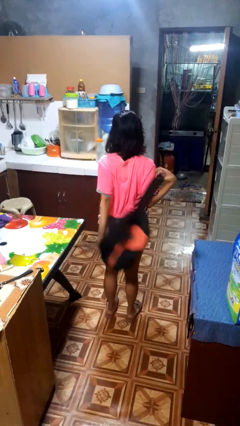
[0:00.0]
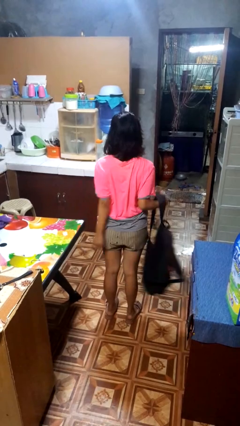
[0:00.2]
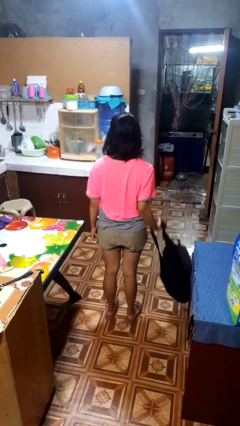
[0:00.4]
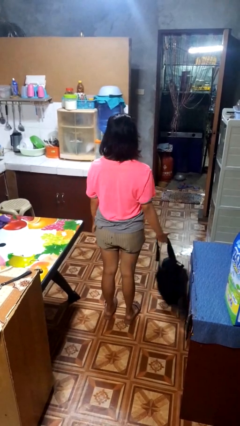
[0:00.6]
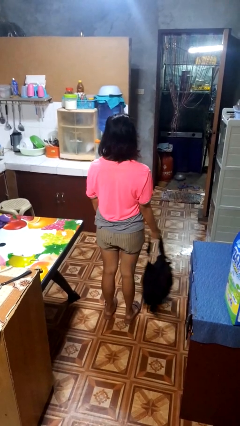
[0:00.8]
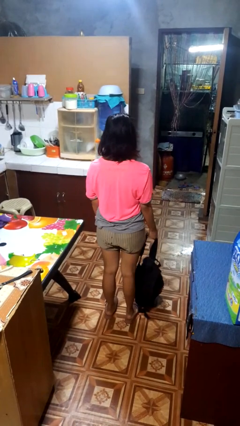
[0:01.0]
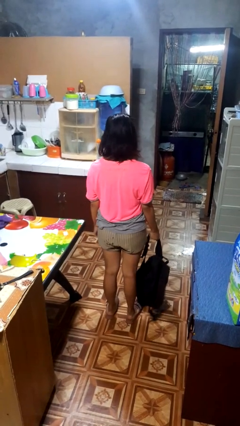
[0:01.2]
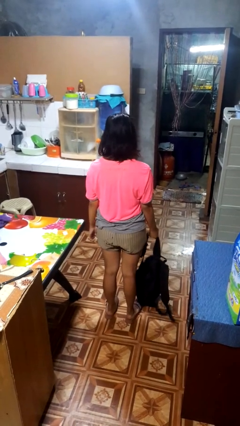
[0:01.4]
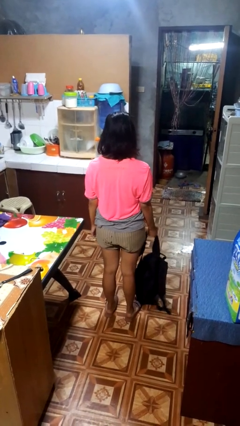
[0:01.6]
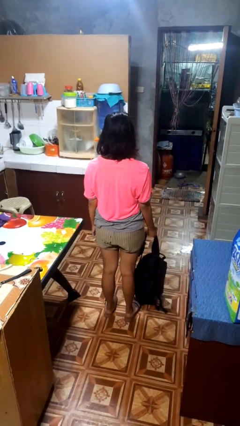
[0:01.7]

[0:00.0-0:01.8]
person takes off backpack

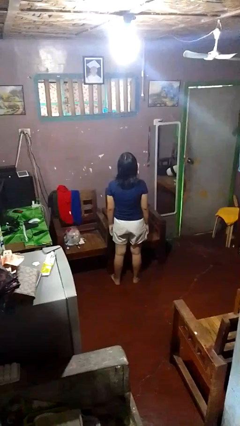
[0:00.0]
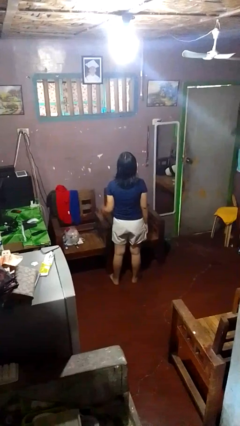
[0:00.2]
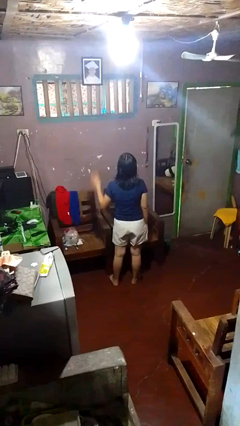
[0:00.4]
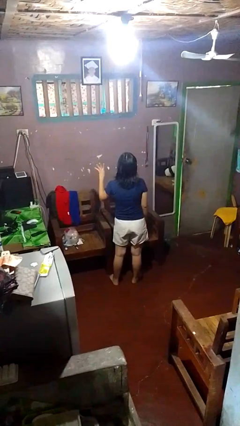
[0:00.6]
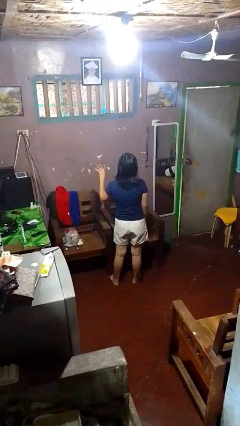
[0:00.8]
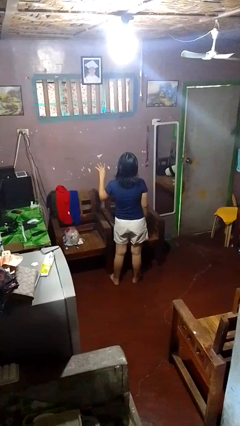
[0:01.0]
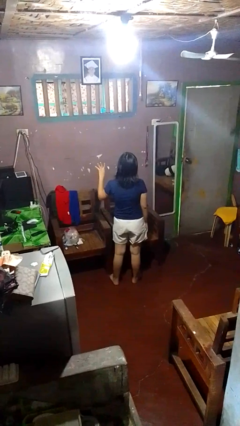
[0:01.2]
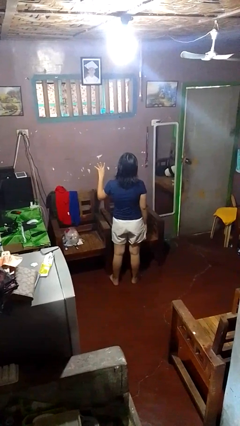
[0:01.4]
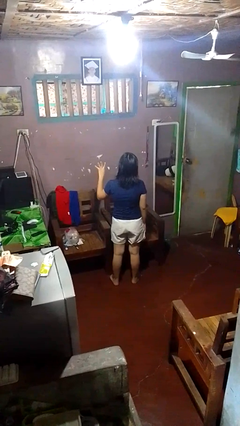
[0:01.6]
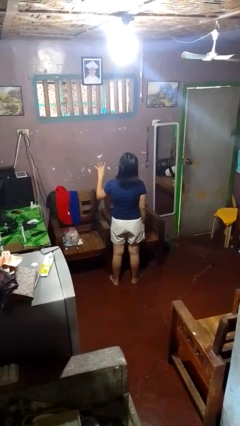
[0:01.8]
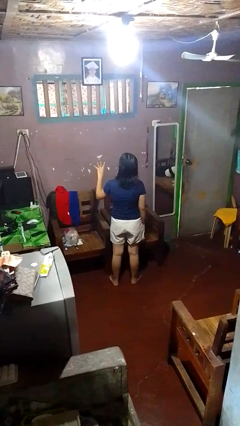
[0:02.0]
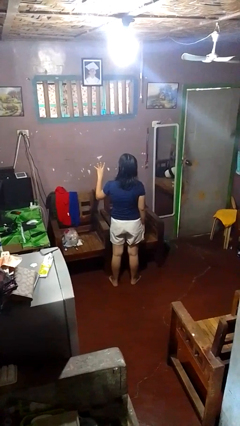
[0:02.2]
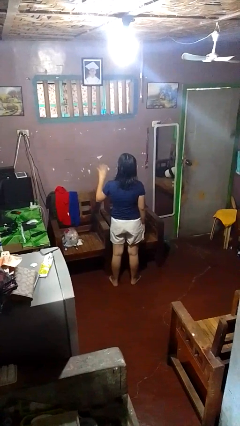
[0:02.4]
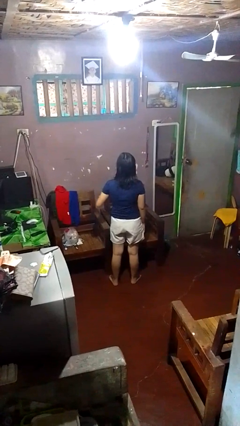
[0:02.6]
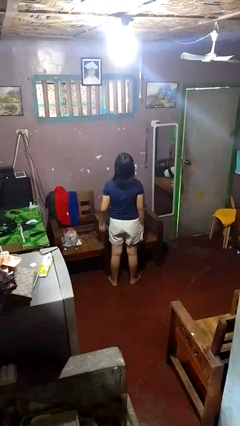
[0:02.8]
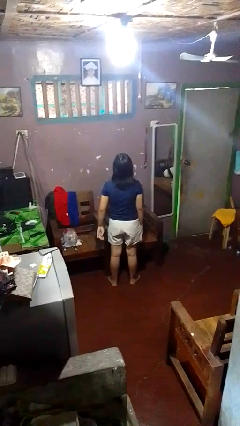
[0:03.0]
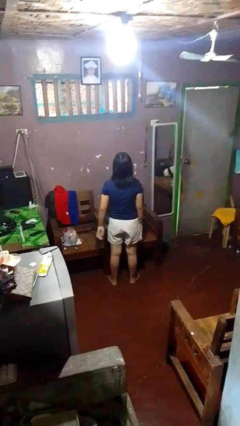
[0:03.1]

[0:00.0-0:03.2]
person gestures number four

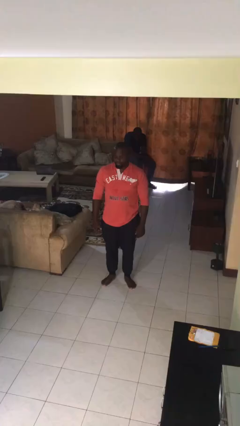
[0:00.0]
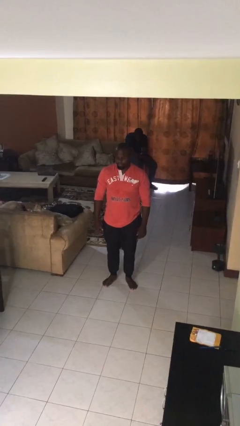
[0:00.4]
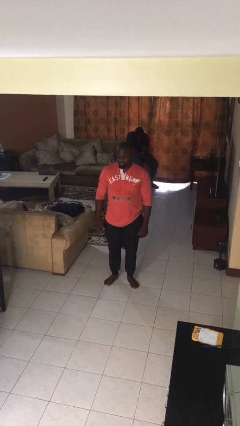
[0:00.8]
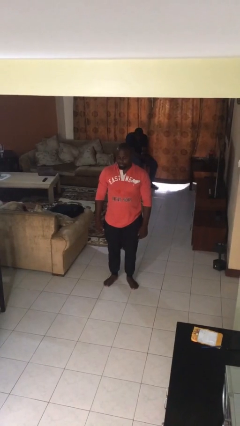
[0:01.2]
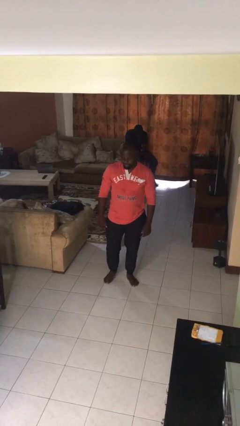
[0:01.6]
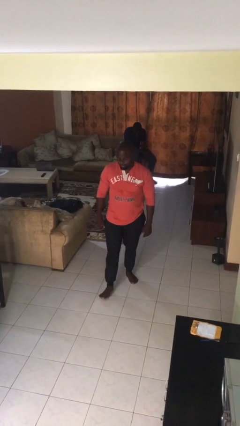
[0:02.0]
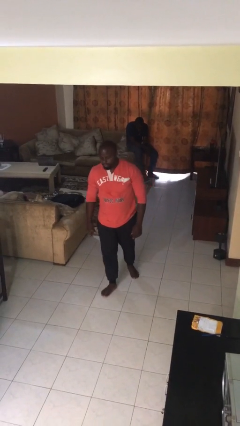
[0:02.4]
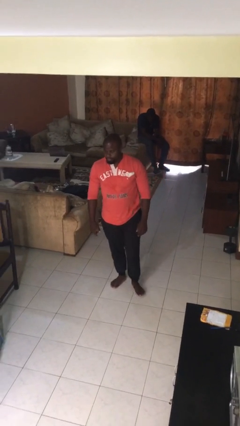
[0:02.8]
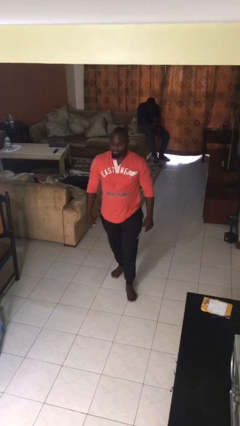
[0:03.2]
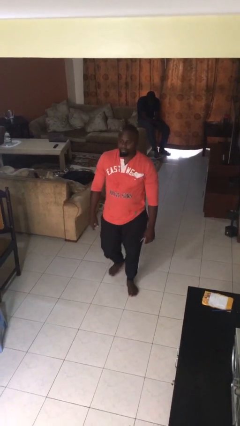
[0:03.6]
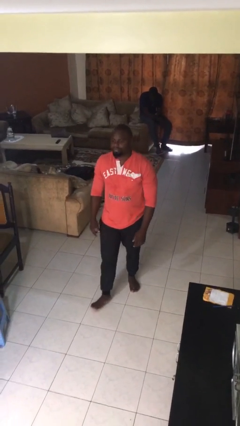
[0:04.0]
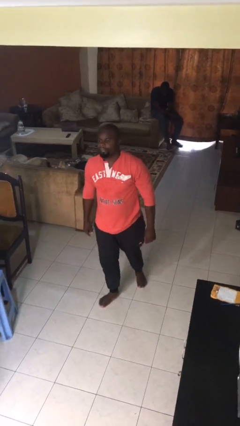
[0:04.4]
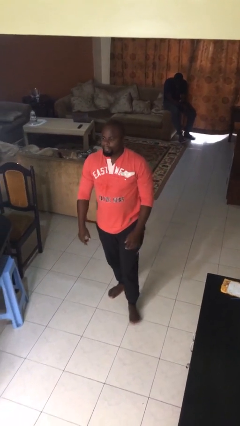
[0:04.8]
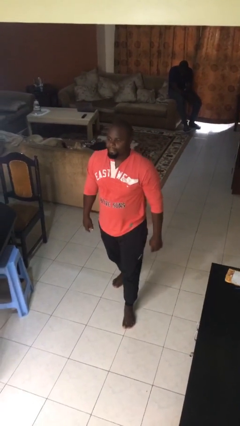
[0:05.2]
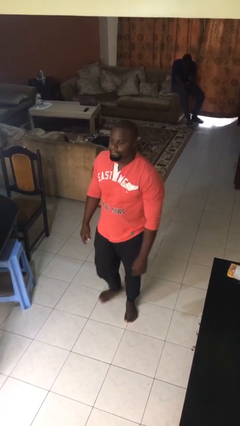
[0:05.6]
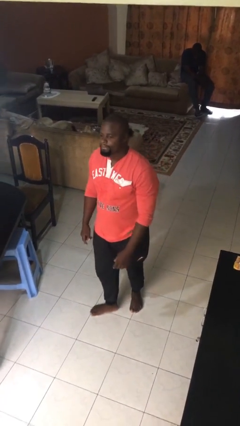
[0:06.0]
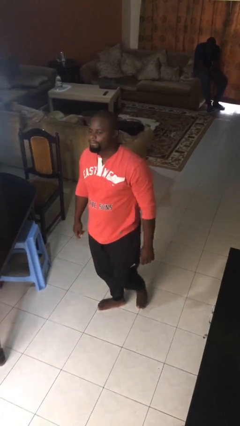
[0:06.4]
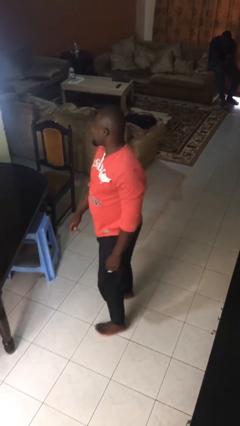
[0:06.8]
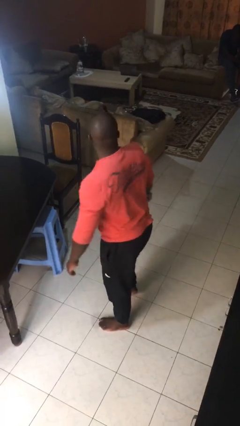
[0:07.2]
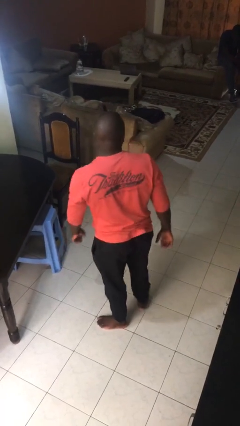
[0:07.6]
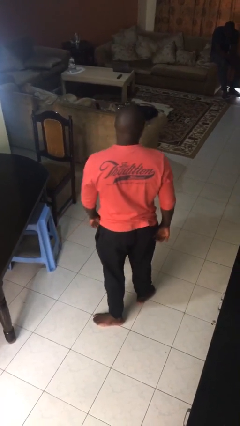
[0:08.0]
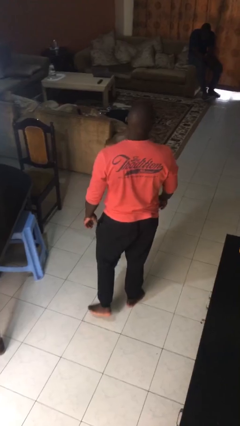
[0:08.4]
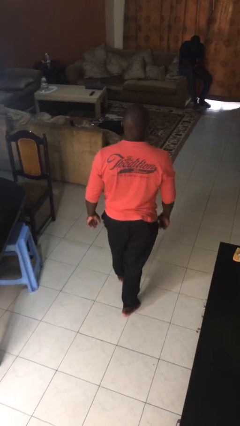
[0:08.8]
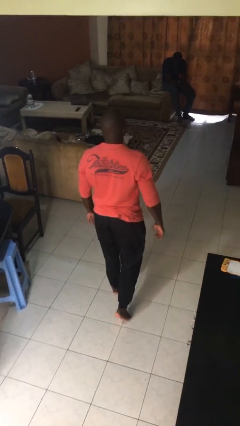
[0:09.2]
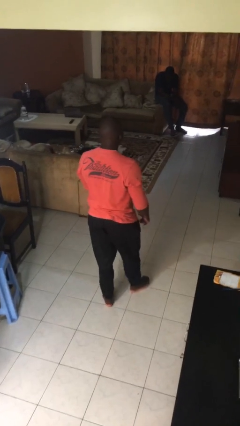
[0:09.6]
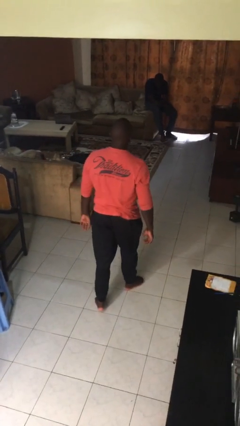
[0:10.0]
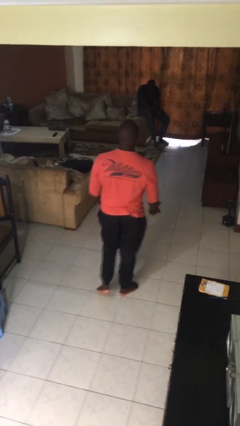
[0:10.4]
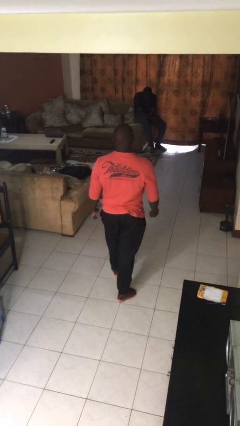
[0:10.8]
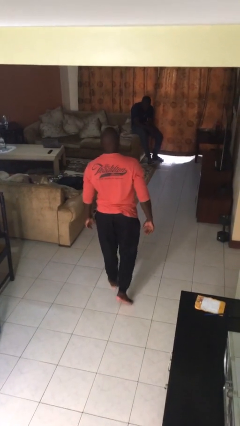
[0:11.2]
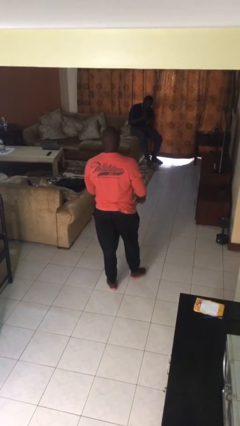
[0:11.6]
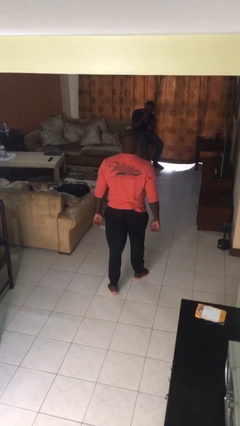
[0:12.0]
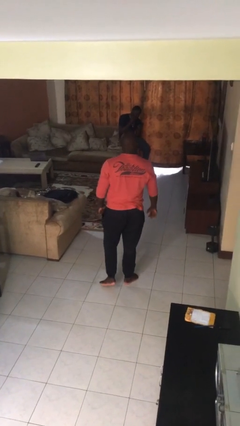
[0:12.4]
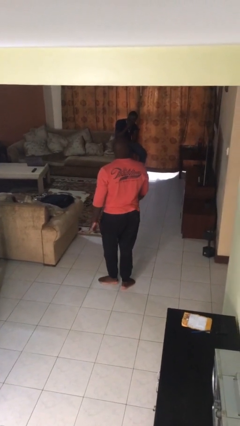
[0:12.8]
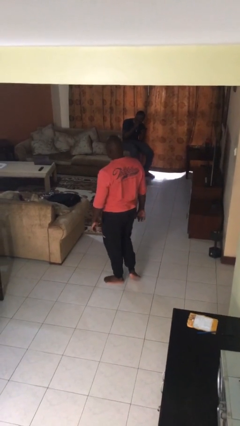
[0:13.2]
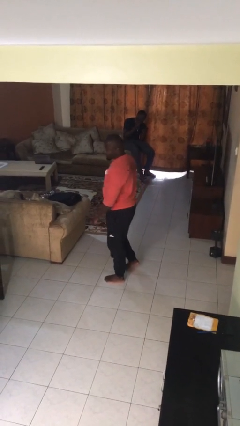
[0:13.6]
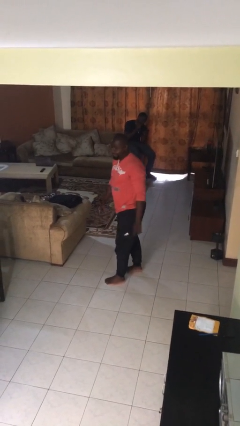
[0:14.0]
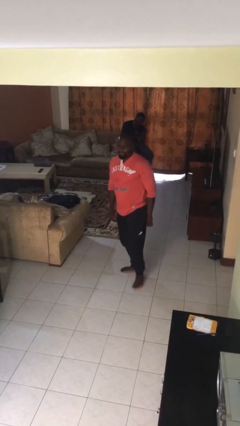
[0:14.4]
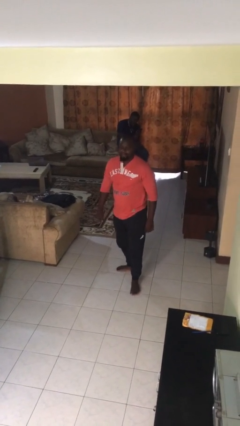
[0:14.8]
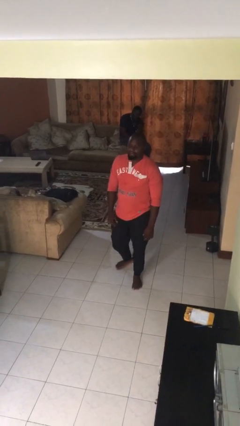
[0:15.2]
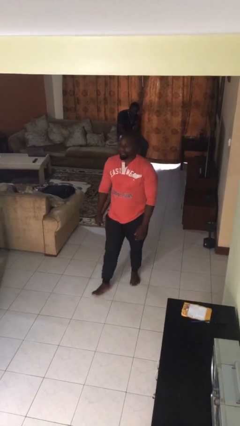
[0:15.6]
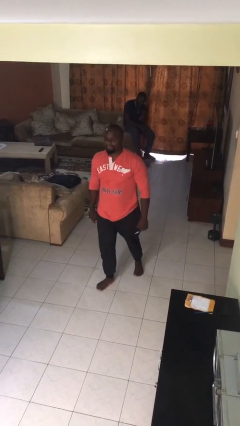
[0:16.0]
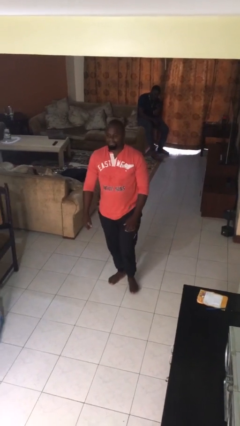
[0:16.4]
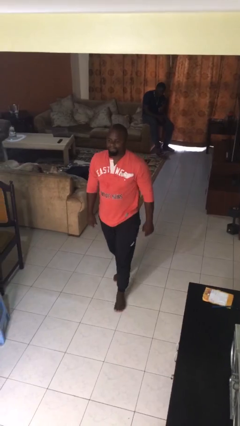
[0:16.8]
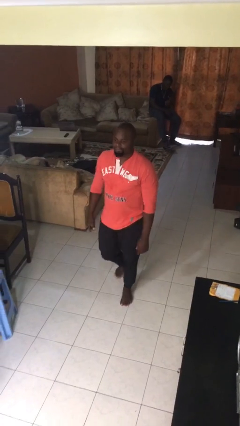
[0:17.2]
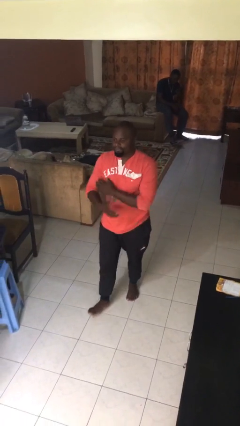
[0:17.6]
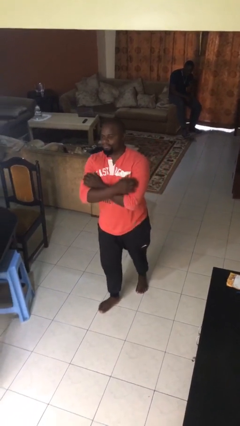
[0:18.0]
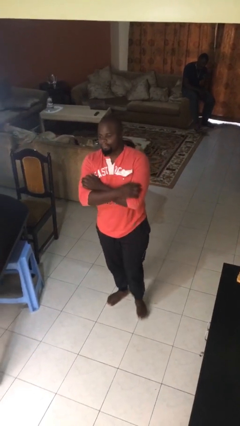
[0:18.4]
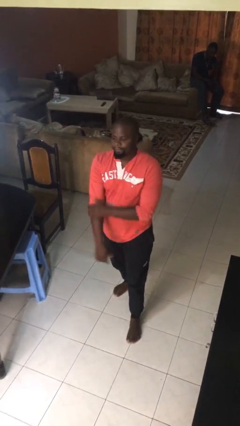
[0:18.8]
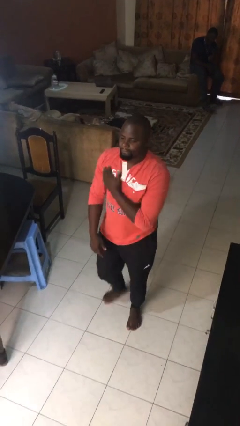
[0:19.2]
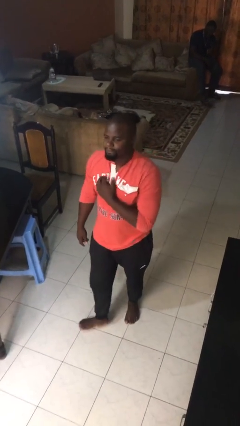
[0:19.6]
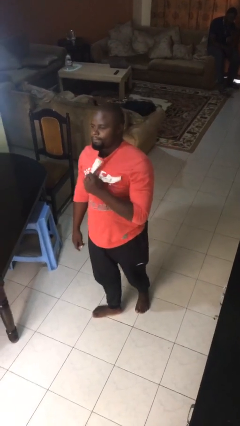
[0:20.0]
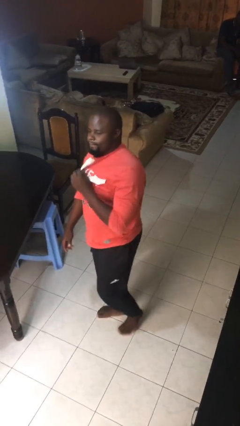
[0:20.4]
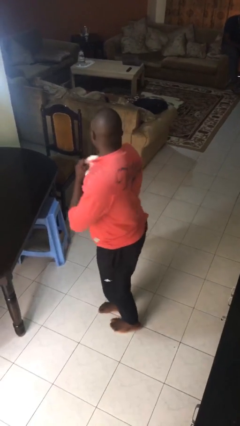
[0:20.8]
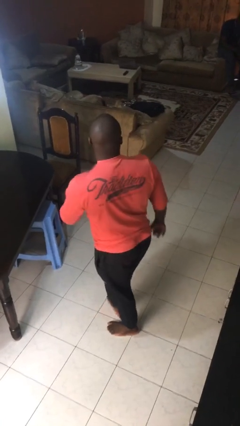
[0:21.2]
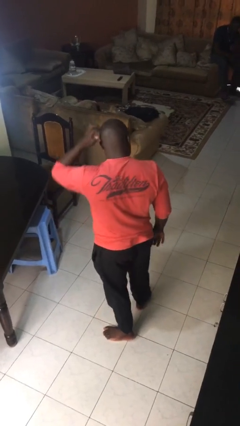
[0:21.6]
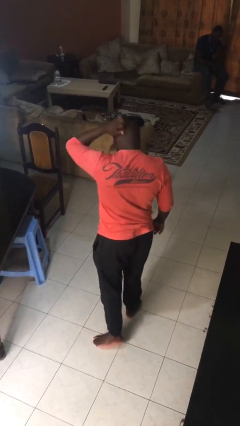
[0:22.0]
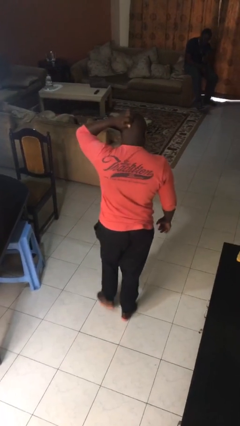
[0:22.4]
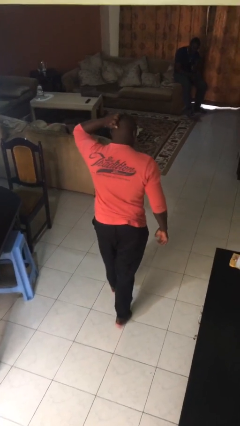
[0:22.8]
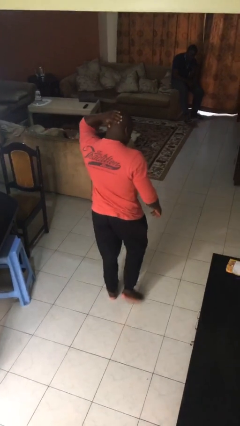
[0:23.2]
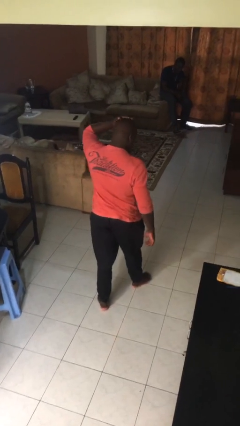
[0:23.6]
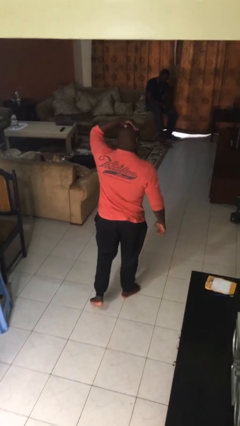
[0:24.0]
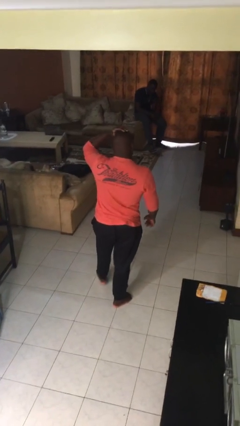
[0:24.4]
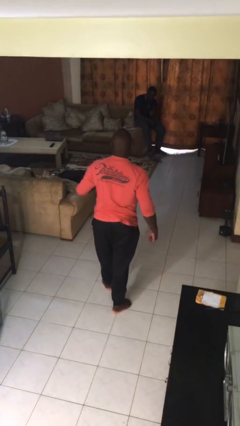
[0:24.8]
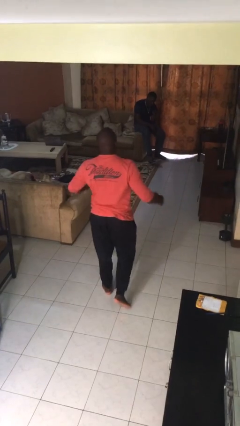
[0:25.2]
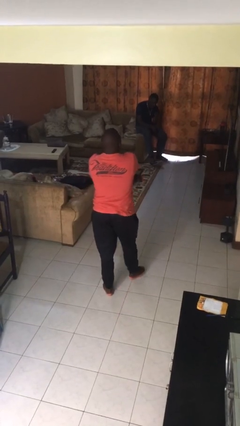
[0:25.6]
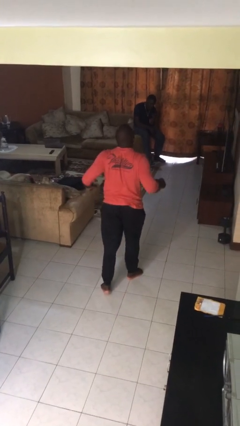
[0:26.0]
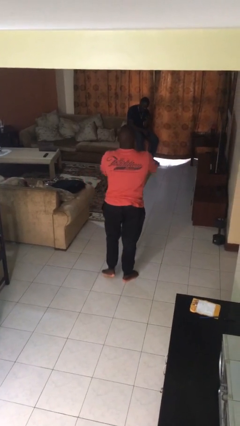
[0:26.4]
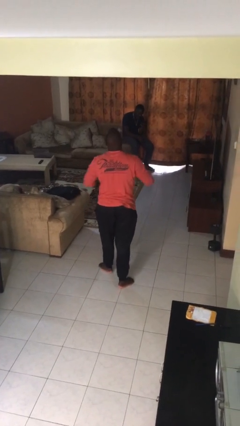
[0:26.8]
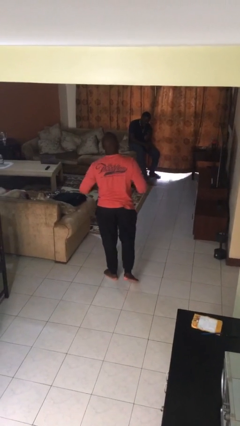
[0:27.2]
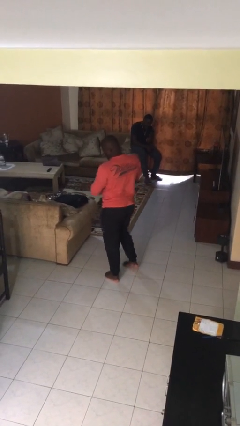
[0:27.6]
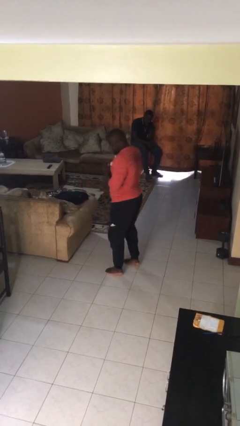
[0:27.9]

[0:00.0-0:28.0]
person walks
